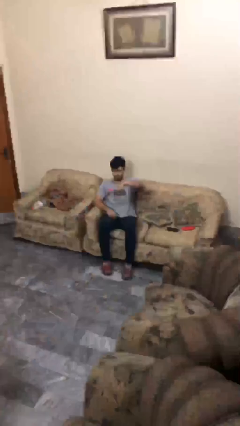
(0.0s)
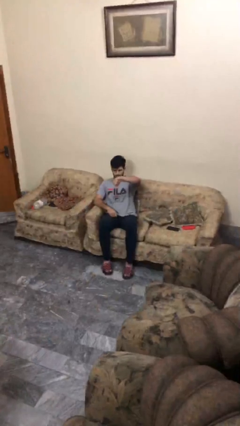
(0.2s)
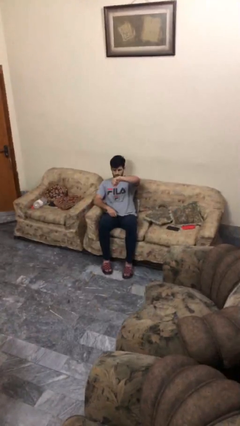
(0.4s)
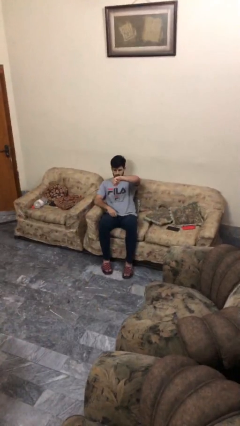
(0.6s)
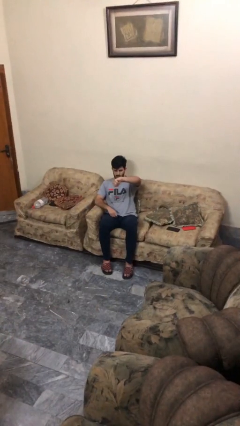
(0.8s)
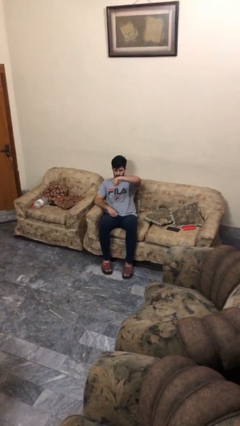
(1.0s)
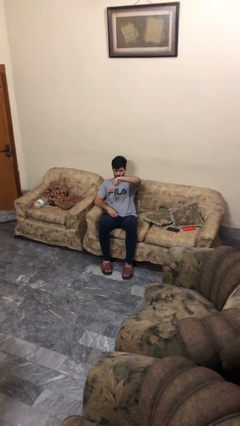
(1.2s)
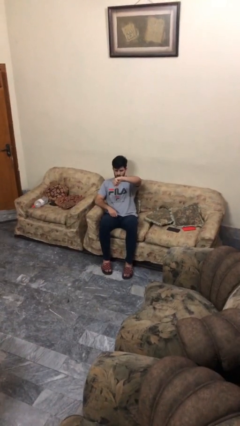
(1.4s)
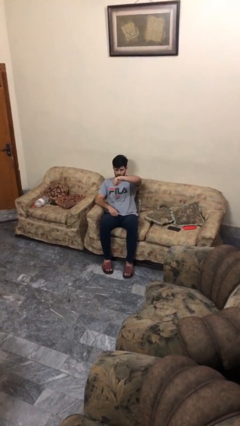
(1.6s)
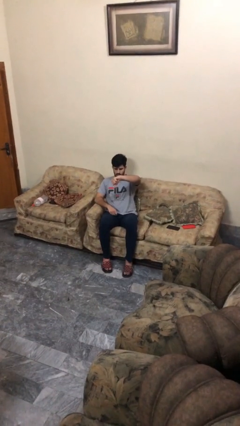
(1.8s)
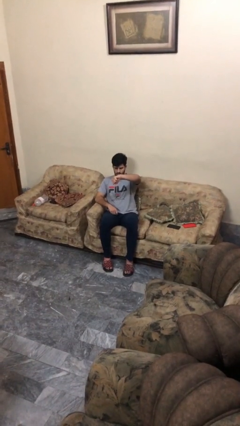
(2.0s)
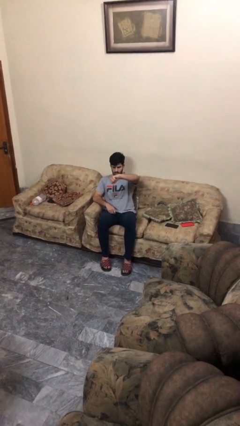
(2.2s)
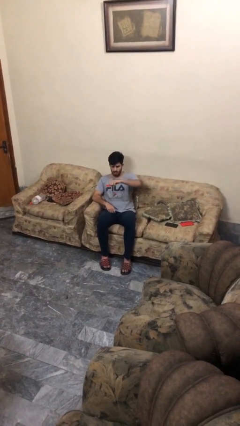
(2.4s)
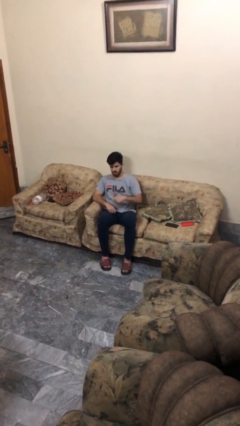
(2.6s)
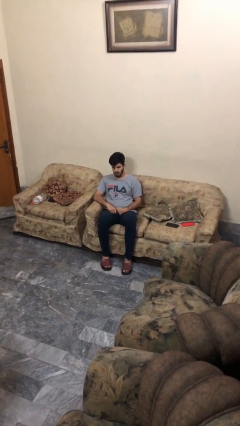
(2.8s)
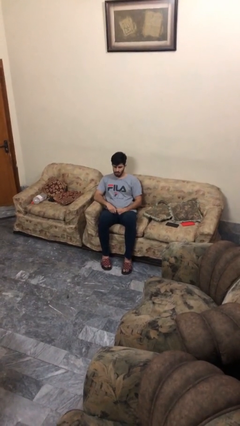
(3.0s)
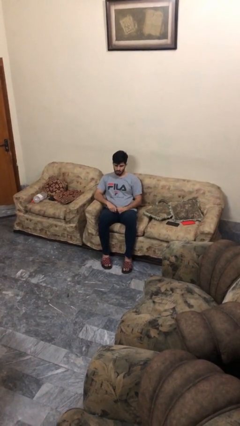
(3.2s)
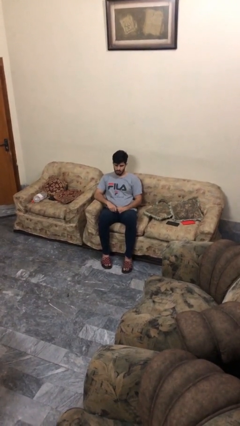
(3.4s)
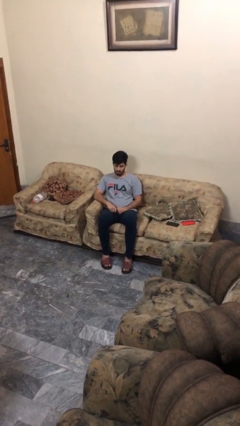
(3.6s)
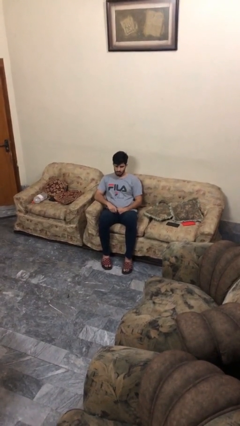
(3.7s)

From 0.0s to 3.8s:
person gestures thumbs down

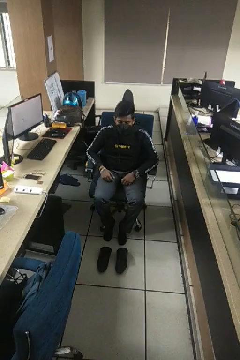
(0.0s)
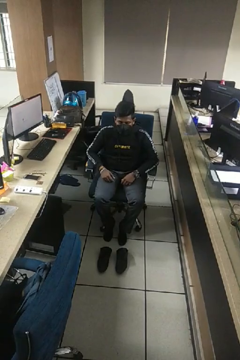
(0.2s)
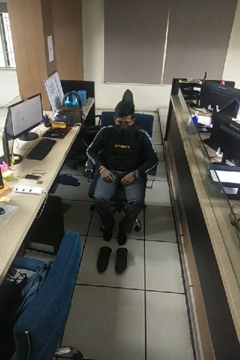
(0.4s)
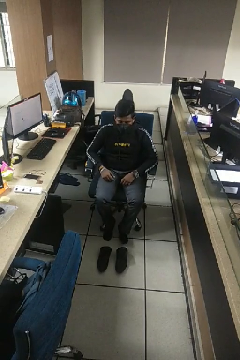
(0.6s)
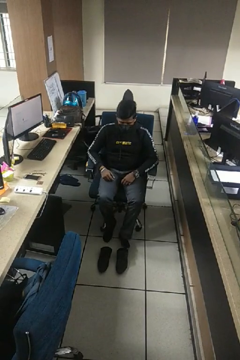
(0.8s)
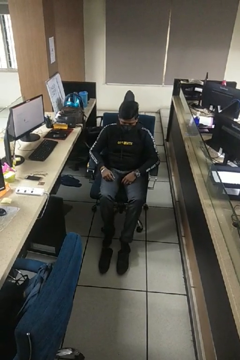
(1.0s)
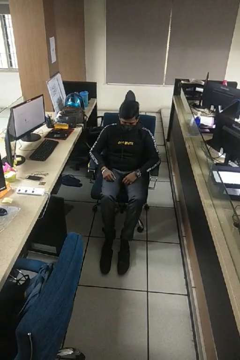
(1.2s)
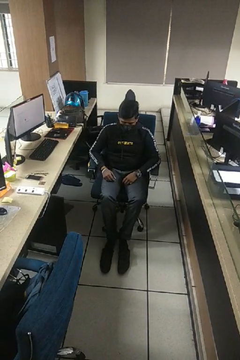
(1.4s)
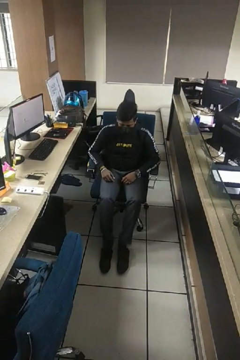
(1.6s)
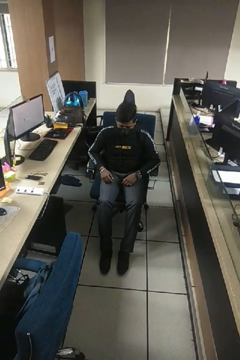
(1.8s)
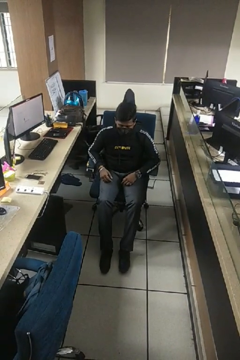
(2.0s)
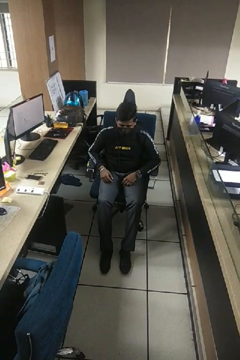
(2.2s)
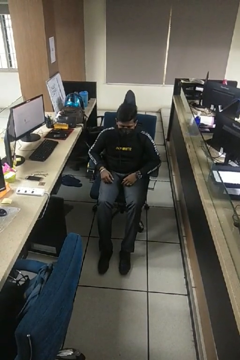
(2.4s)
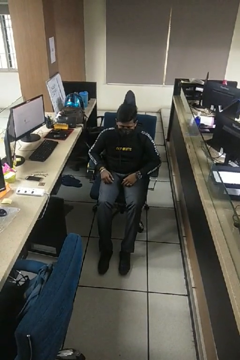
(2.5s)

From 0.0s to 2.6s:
person puts on shoes

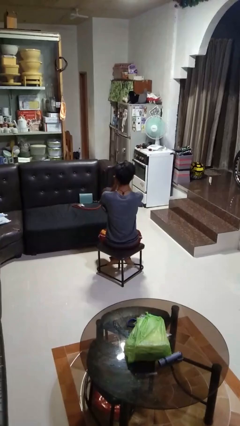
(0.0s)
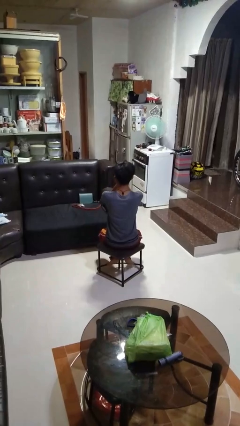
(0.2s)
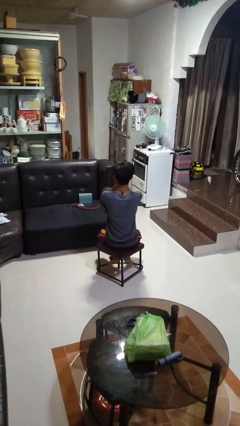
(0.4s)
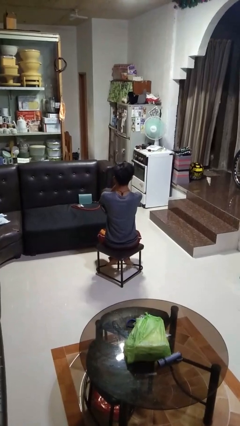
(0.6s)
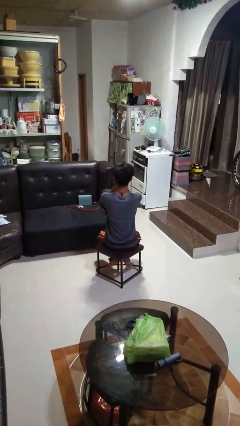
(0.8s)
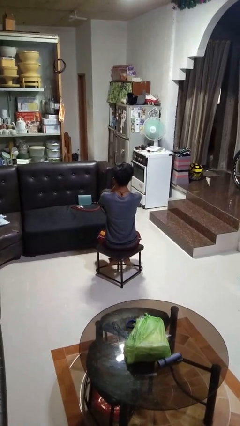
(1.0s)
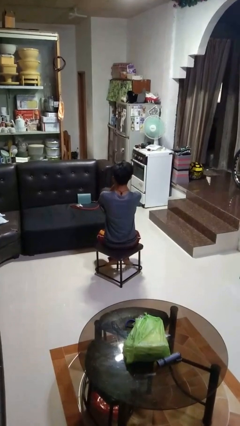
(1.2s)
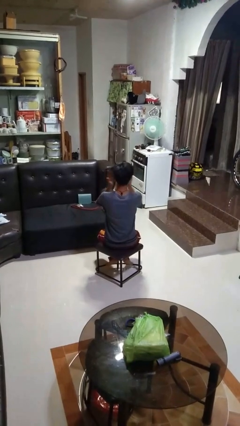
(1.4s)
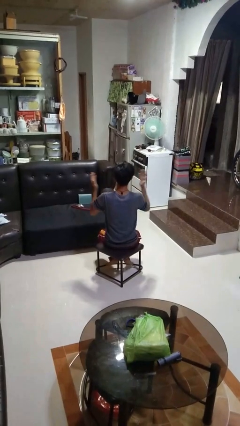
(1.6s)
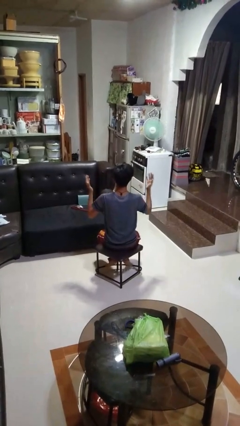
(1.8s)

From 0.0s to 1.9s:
person covers face with hands

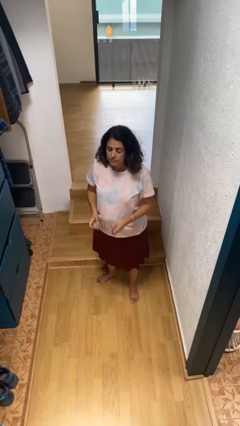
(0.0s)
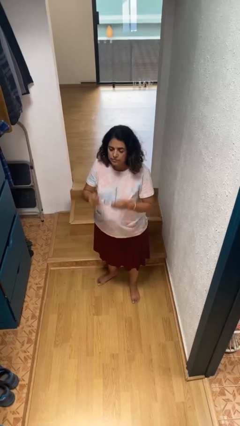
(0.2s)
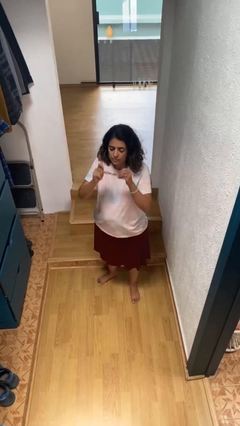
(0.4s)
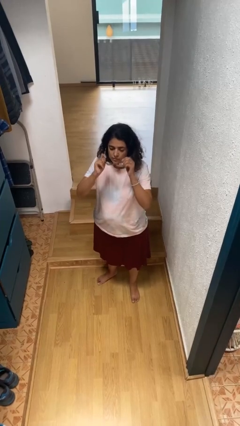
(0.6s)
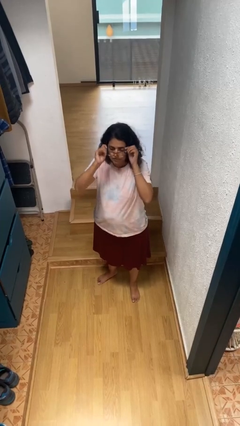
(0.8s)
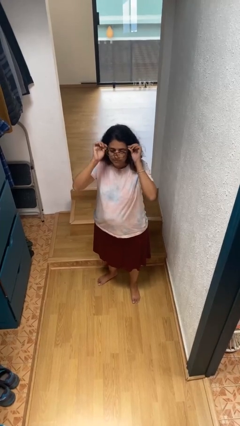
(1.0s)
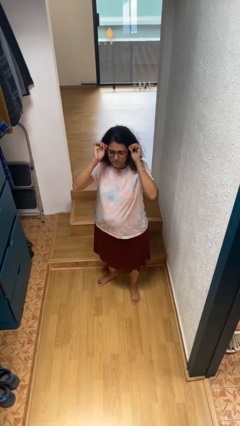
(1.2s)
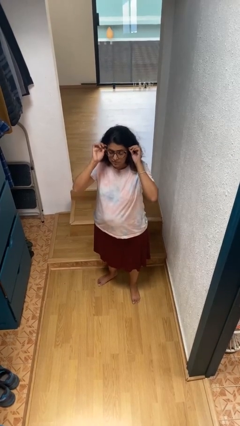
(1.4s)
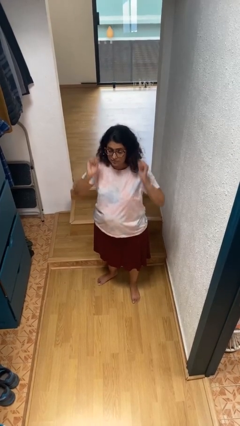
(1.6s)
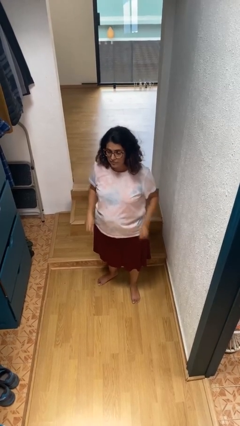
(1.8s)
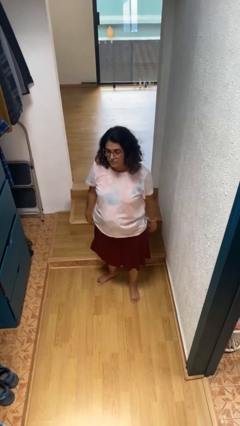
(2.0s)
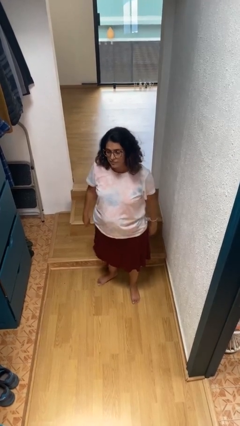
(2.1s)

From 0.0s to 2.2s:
person puts on glasses

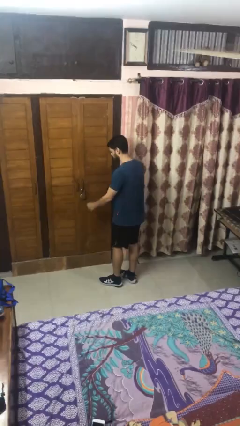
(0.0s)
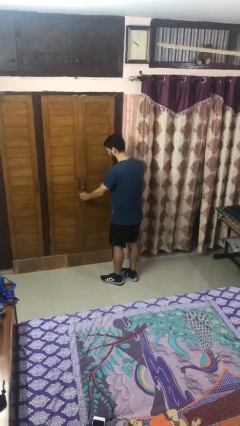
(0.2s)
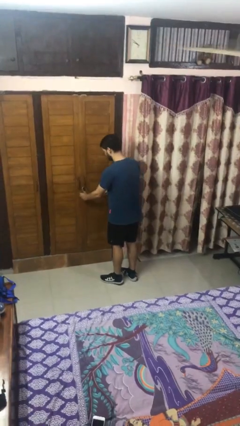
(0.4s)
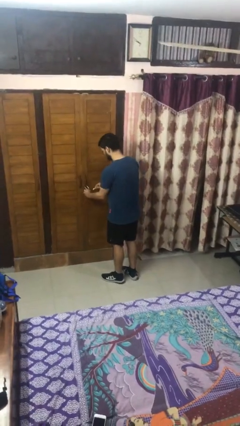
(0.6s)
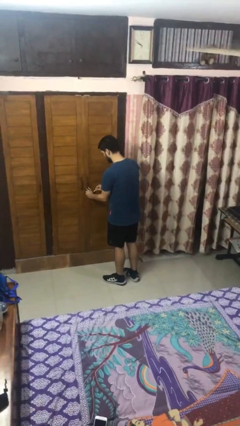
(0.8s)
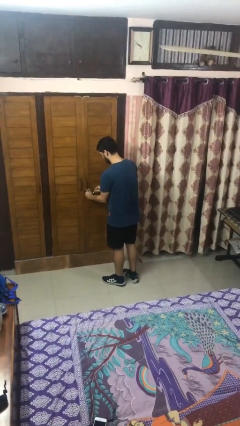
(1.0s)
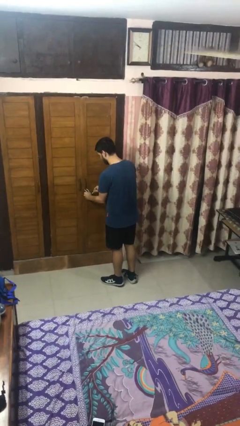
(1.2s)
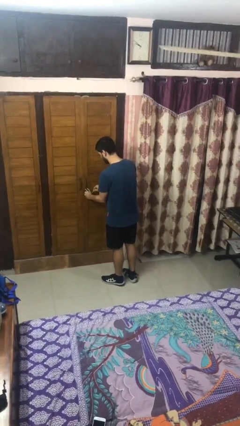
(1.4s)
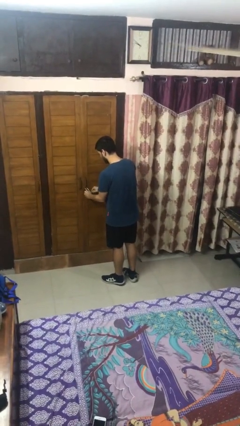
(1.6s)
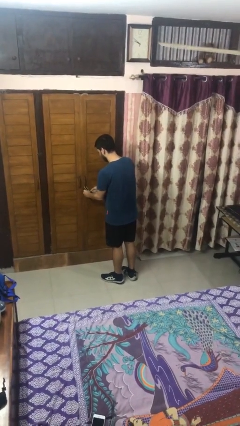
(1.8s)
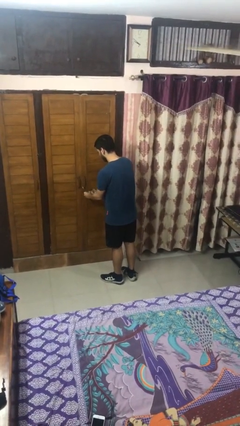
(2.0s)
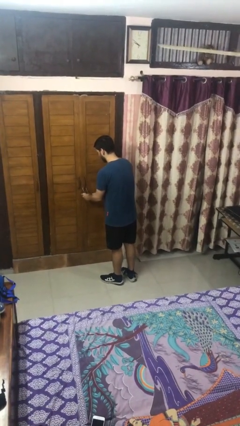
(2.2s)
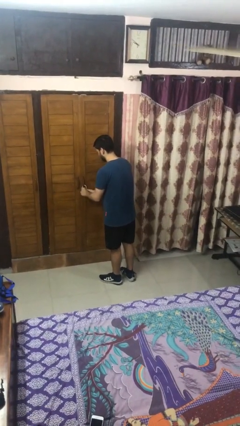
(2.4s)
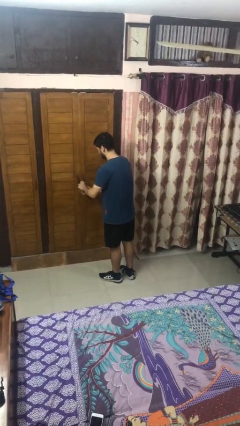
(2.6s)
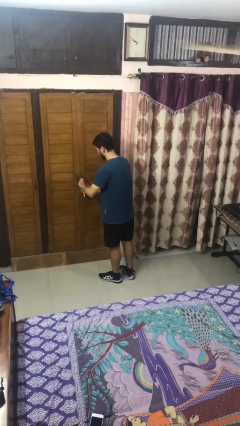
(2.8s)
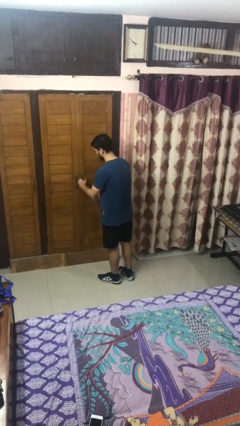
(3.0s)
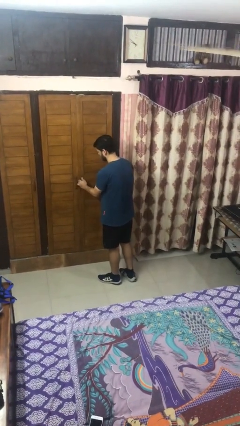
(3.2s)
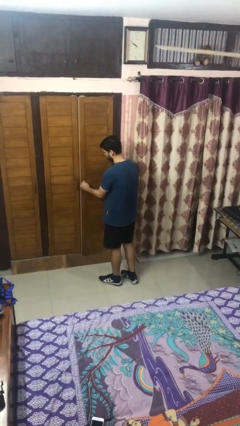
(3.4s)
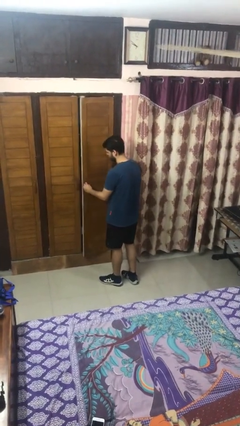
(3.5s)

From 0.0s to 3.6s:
person unlocks door with keys

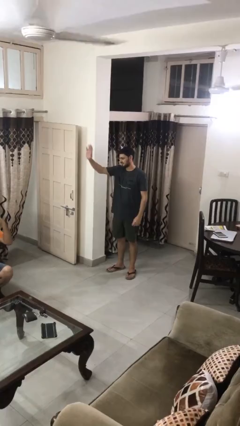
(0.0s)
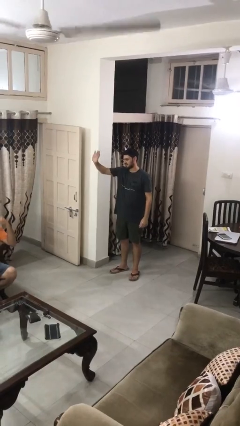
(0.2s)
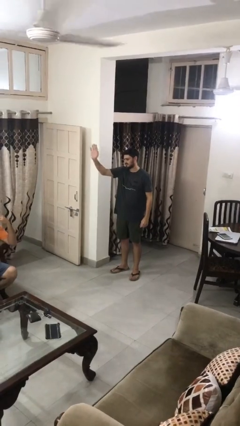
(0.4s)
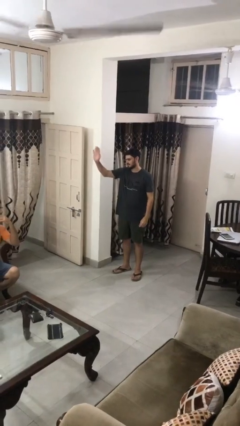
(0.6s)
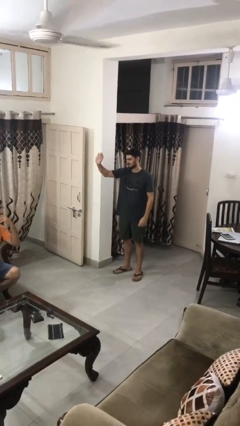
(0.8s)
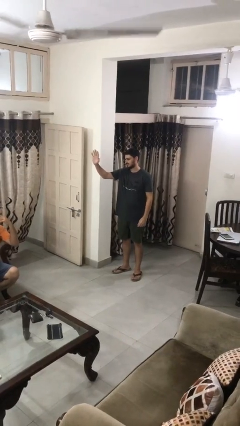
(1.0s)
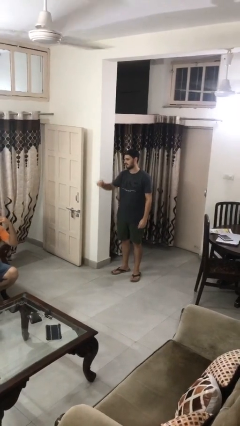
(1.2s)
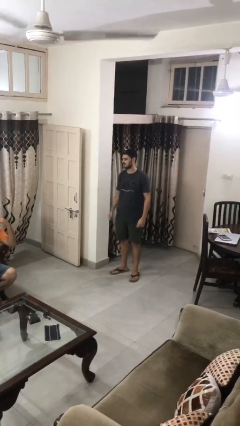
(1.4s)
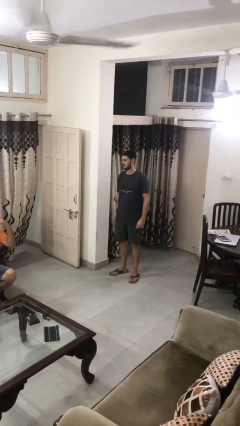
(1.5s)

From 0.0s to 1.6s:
person waves at person

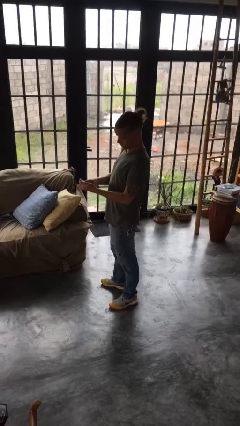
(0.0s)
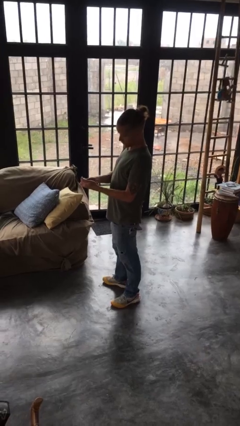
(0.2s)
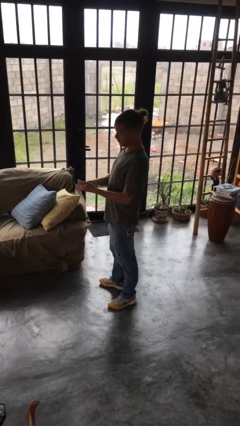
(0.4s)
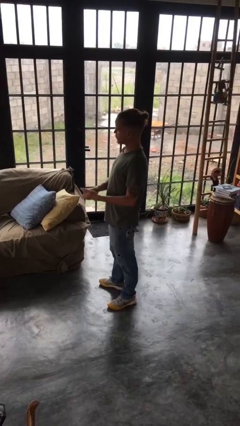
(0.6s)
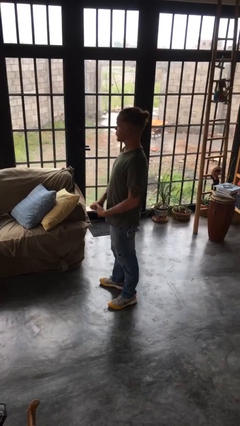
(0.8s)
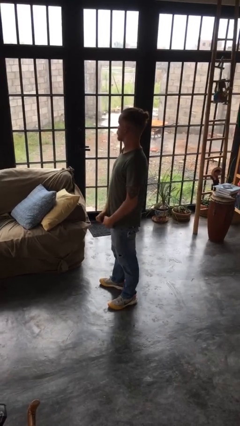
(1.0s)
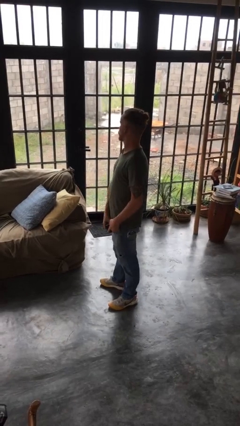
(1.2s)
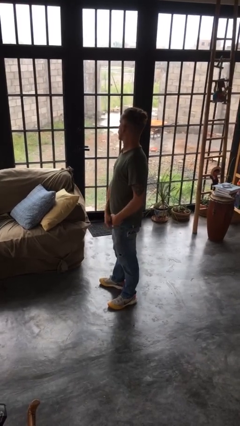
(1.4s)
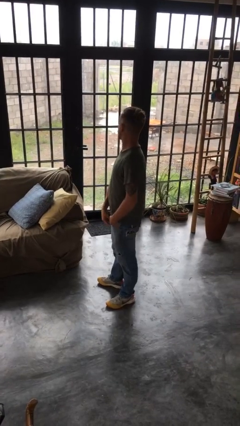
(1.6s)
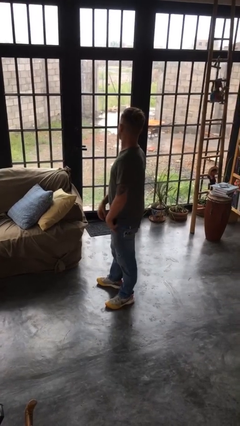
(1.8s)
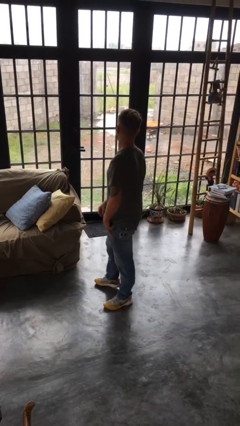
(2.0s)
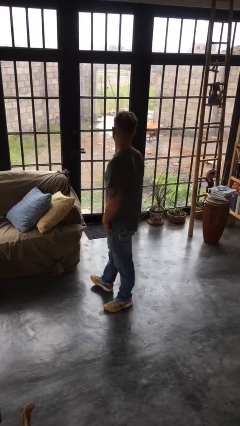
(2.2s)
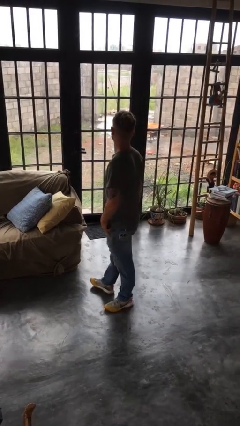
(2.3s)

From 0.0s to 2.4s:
person puts phone into pocket
